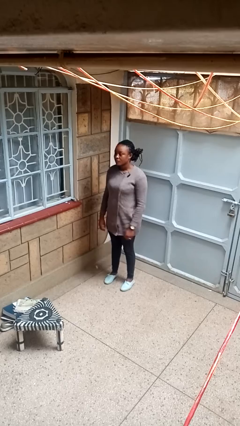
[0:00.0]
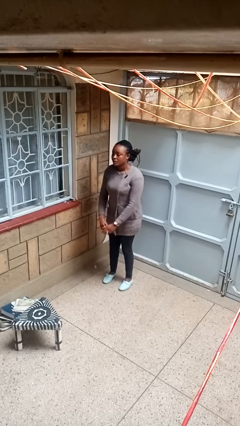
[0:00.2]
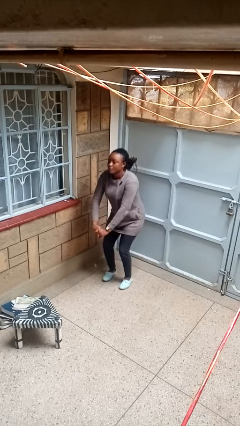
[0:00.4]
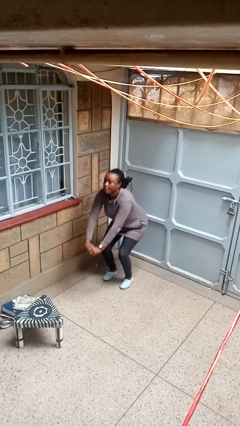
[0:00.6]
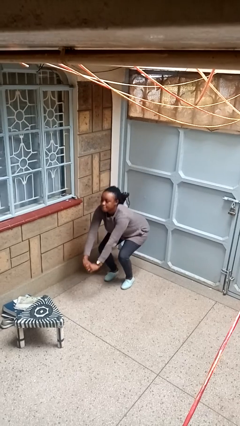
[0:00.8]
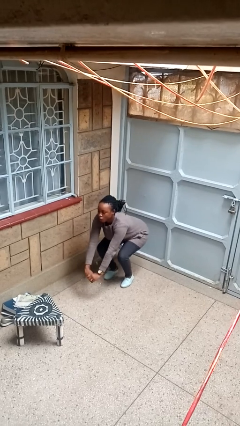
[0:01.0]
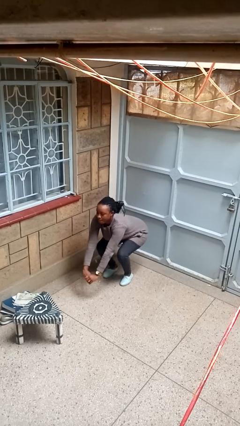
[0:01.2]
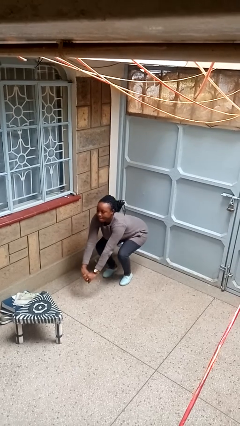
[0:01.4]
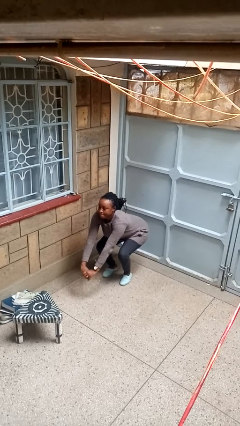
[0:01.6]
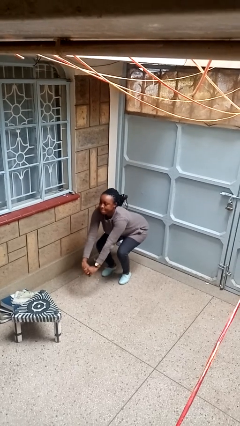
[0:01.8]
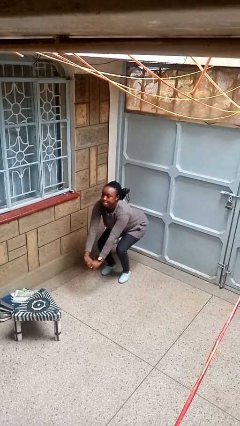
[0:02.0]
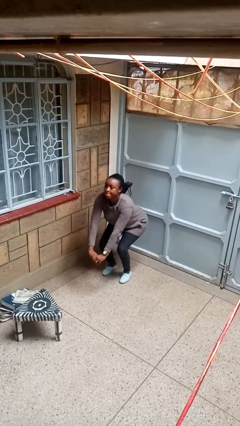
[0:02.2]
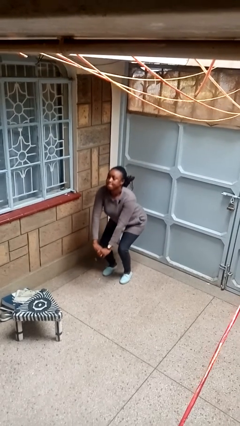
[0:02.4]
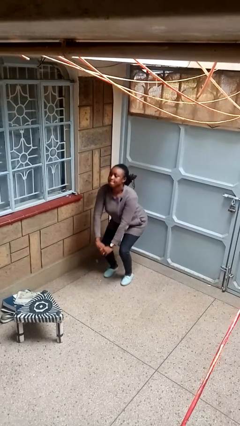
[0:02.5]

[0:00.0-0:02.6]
person squats

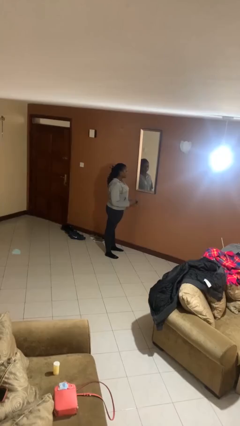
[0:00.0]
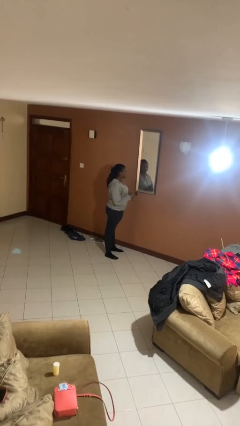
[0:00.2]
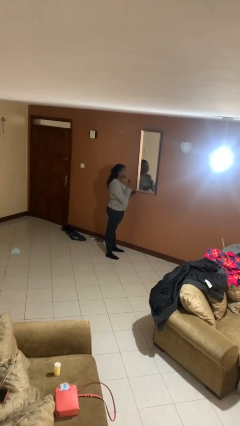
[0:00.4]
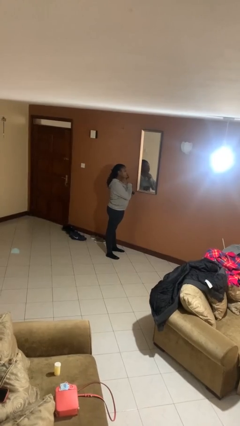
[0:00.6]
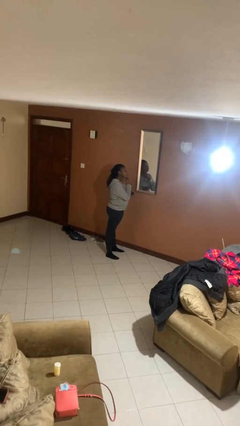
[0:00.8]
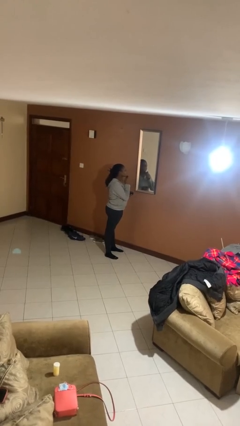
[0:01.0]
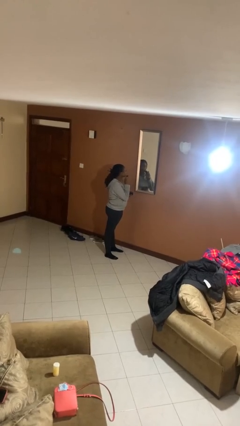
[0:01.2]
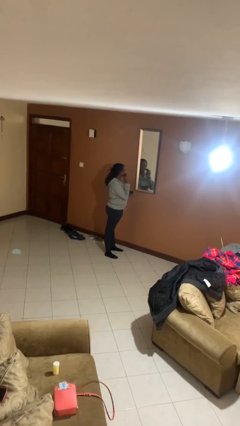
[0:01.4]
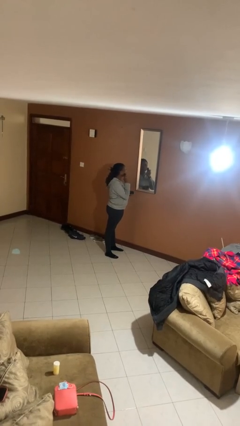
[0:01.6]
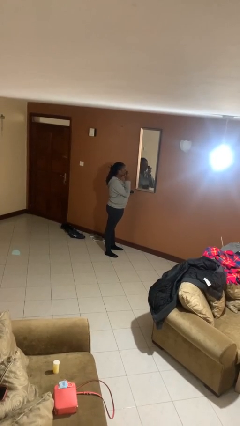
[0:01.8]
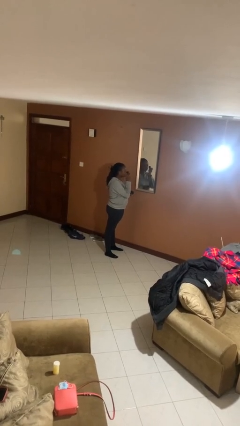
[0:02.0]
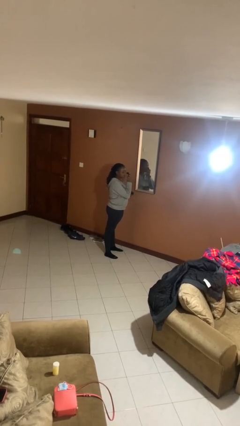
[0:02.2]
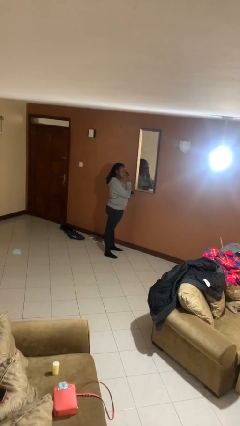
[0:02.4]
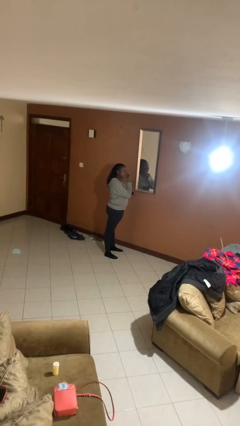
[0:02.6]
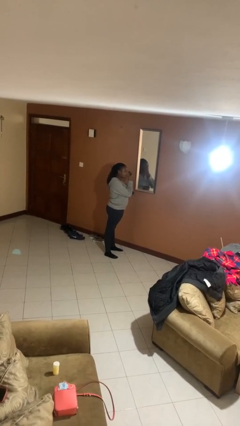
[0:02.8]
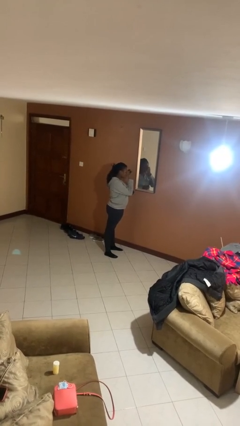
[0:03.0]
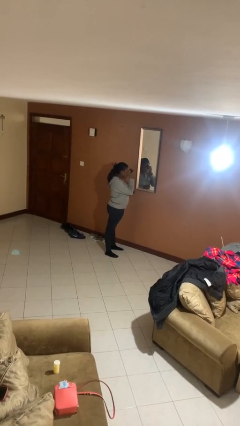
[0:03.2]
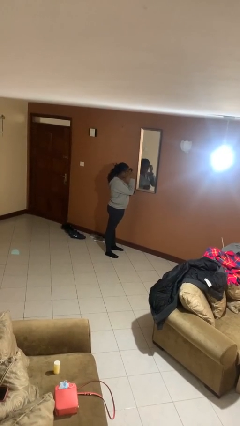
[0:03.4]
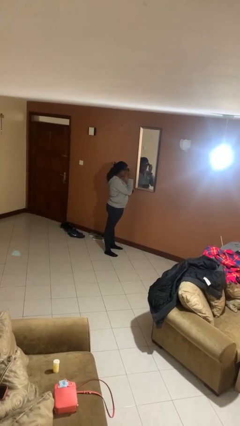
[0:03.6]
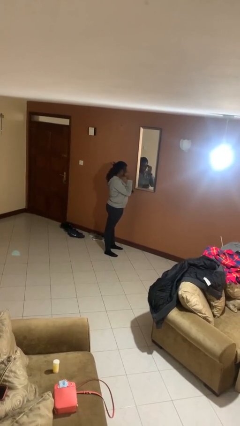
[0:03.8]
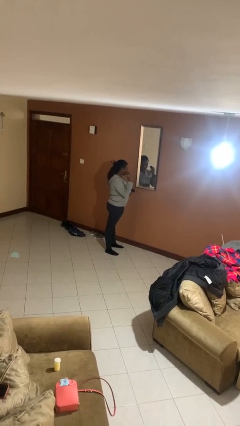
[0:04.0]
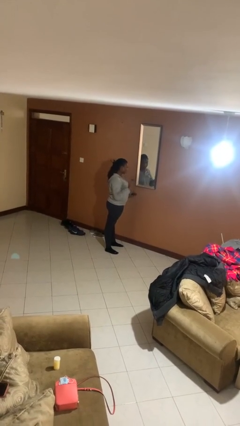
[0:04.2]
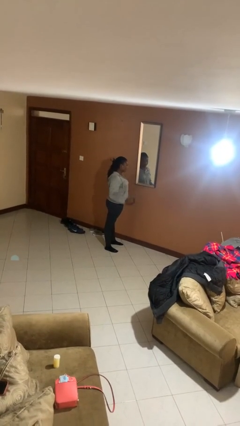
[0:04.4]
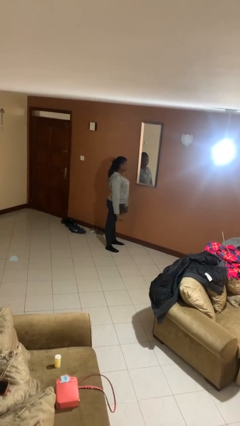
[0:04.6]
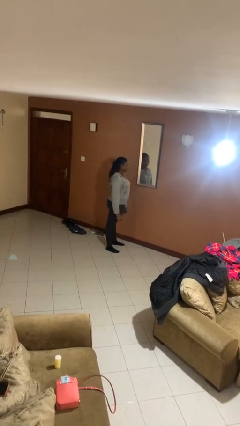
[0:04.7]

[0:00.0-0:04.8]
person applies foundation makeup

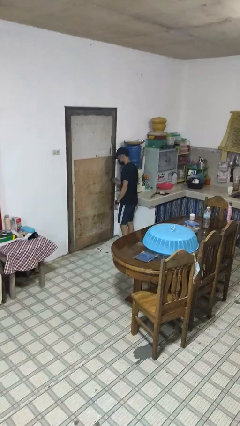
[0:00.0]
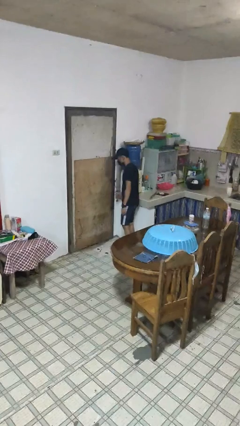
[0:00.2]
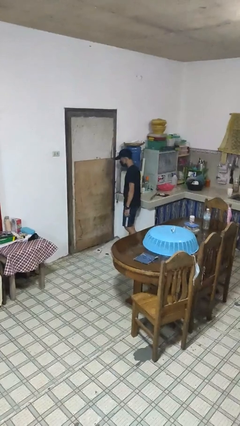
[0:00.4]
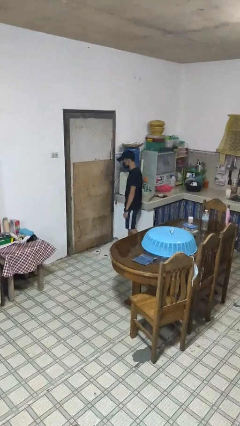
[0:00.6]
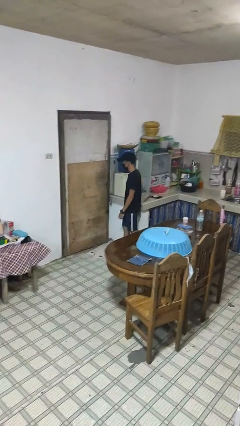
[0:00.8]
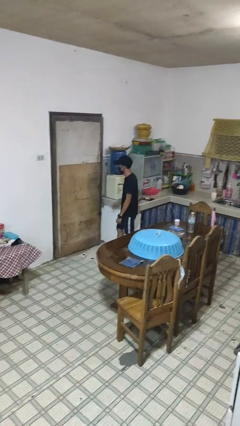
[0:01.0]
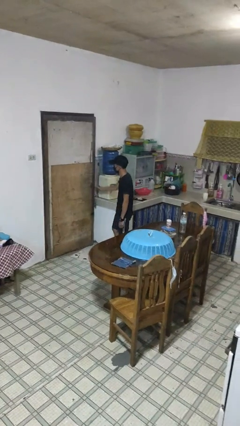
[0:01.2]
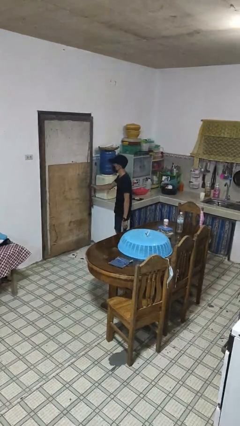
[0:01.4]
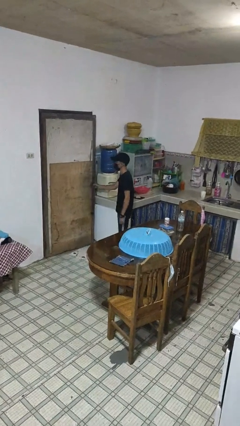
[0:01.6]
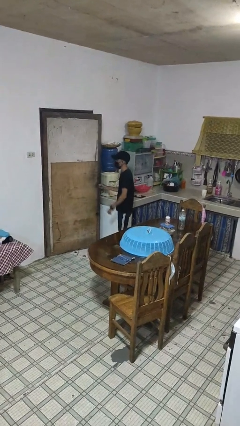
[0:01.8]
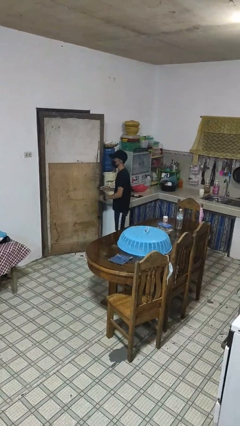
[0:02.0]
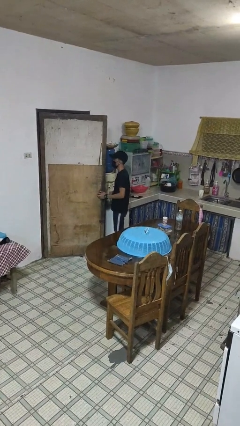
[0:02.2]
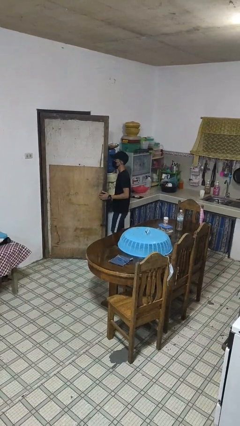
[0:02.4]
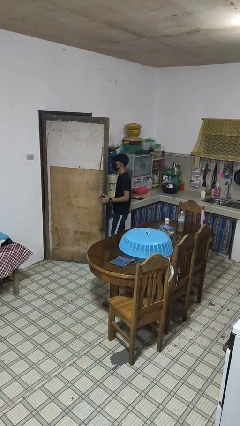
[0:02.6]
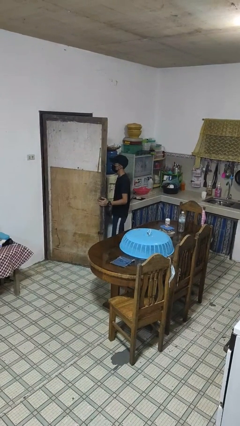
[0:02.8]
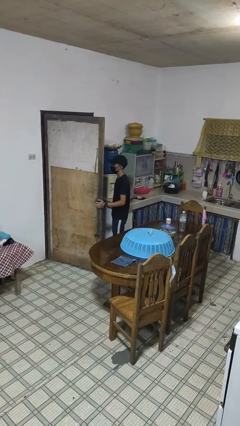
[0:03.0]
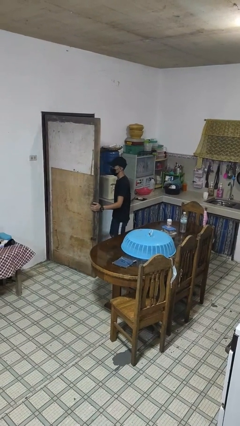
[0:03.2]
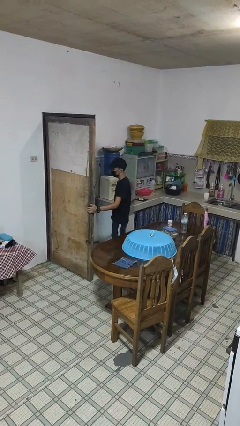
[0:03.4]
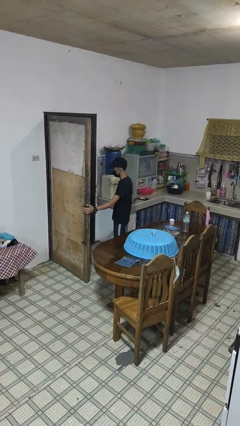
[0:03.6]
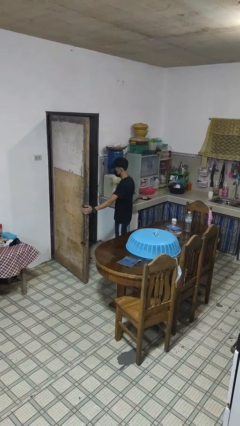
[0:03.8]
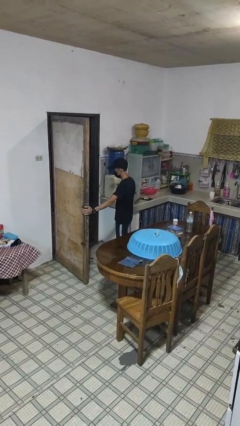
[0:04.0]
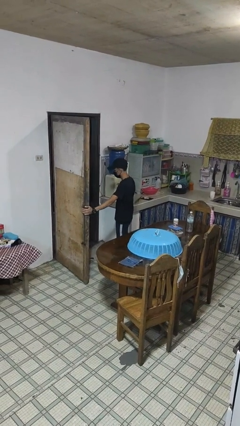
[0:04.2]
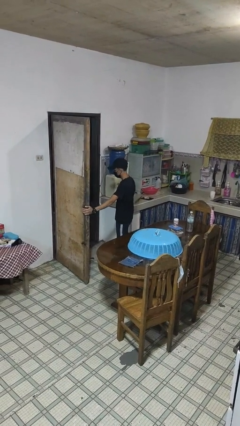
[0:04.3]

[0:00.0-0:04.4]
person opens facility door

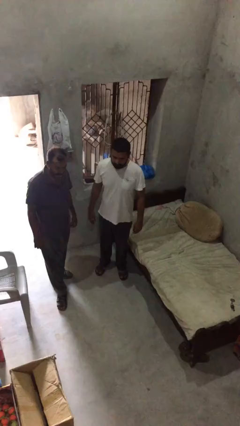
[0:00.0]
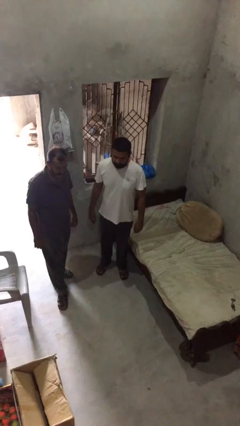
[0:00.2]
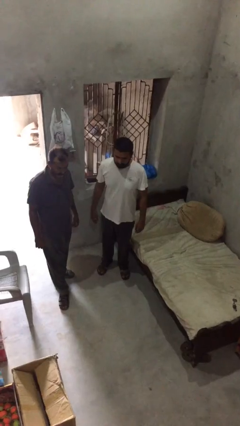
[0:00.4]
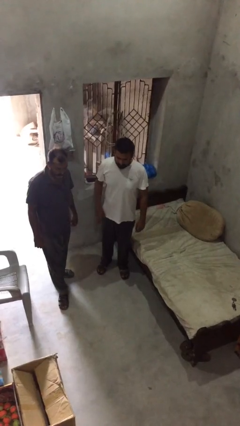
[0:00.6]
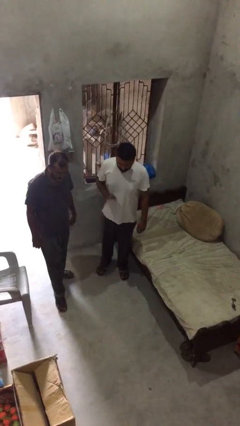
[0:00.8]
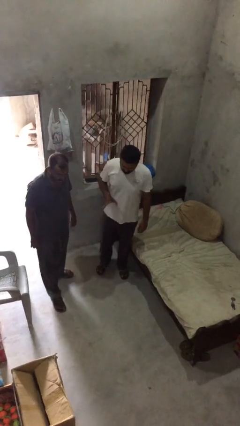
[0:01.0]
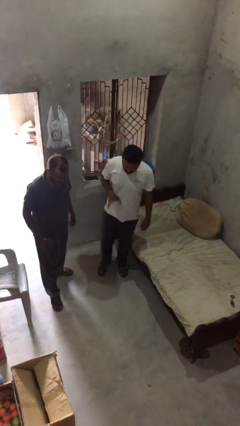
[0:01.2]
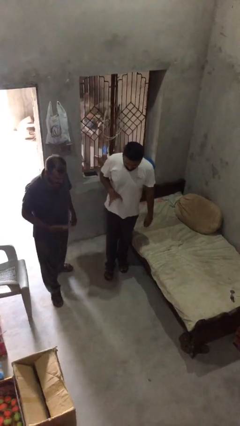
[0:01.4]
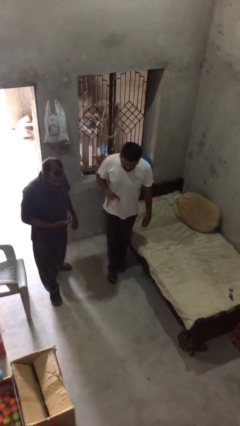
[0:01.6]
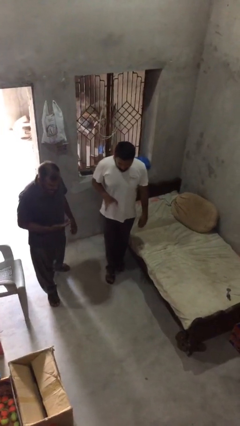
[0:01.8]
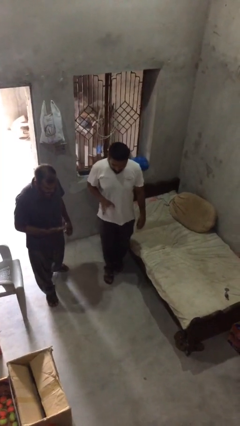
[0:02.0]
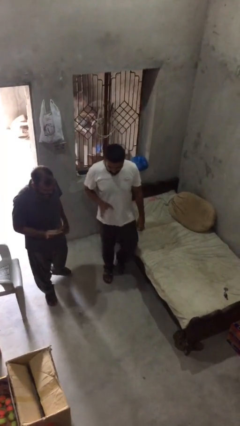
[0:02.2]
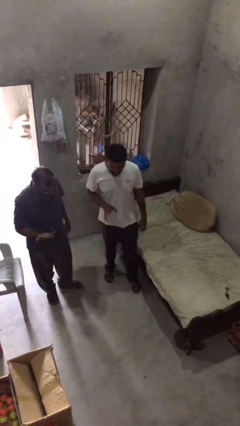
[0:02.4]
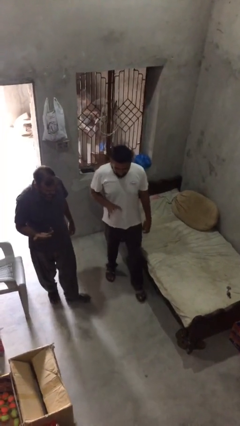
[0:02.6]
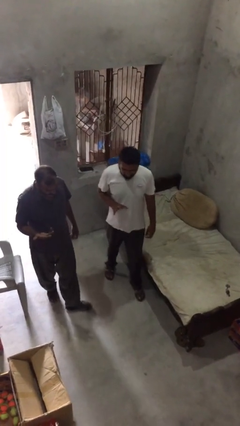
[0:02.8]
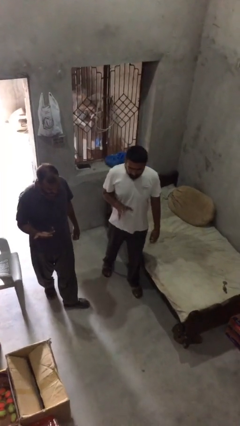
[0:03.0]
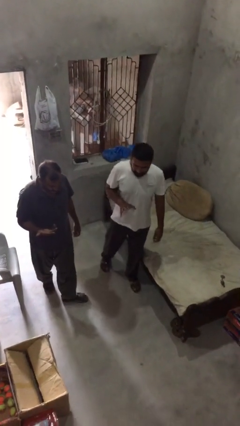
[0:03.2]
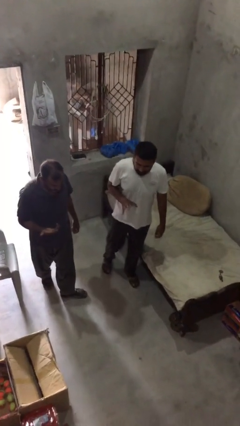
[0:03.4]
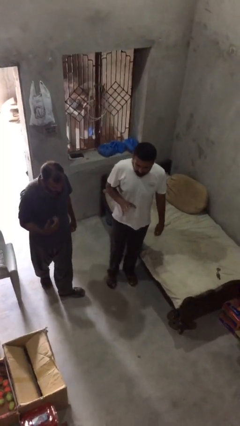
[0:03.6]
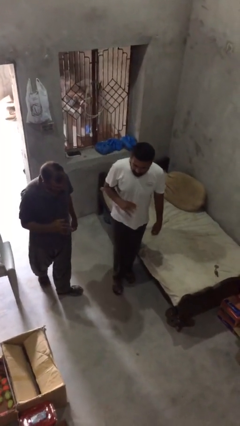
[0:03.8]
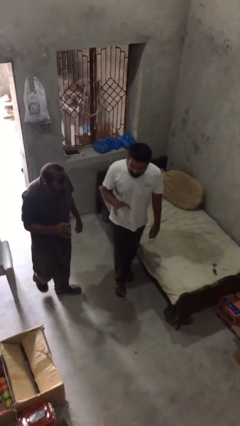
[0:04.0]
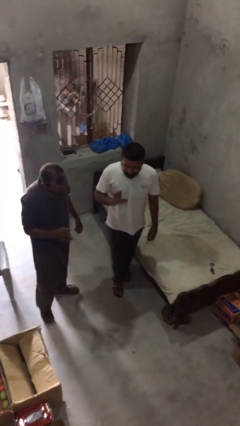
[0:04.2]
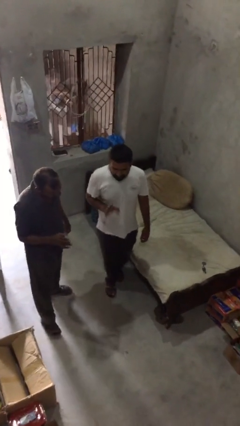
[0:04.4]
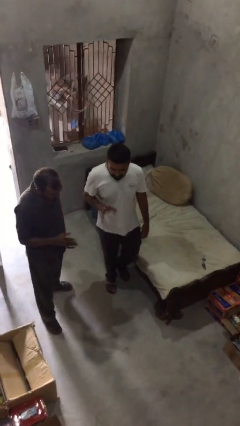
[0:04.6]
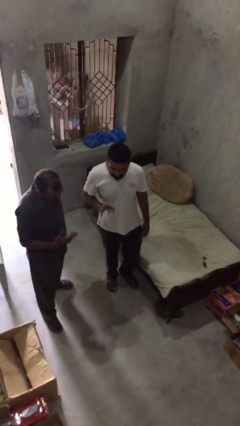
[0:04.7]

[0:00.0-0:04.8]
person talks to person

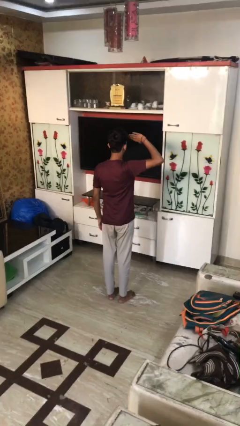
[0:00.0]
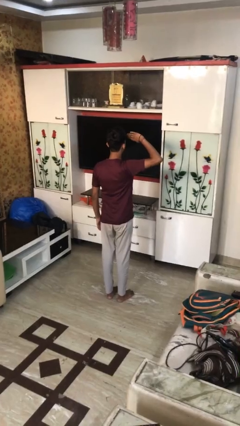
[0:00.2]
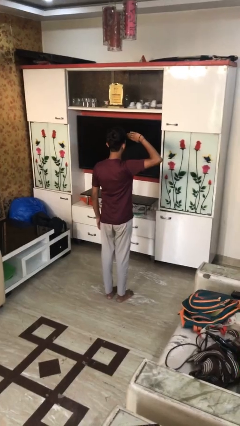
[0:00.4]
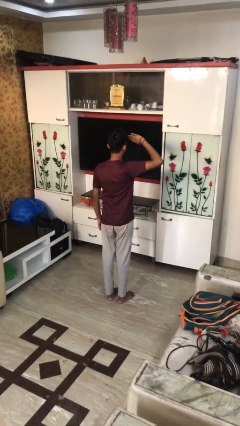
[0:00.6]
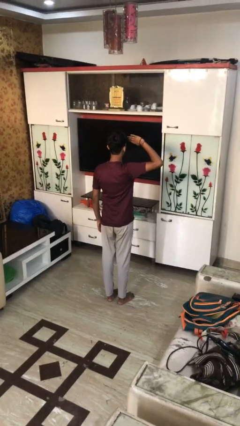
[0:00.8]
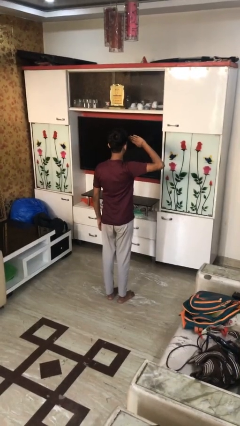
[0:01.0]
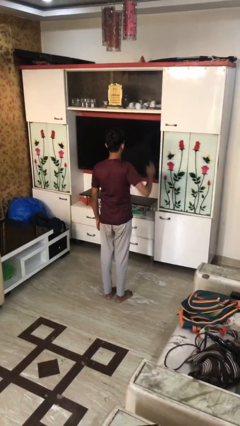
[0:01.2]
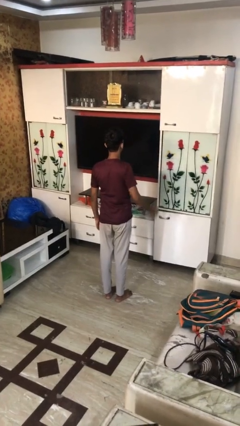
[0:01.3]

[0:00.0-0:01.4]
person salutes
